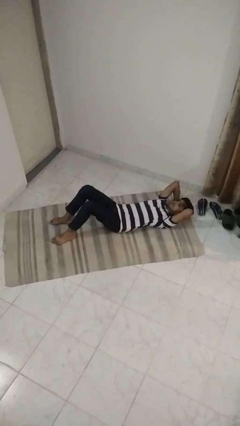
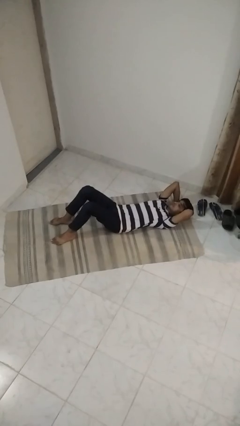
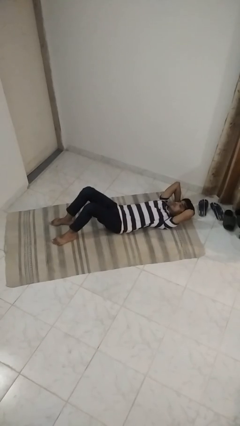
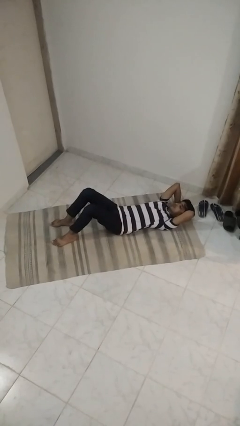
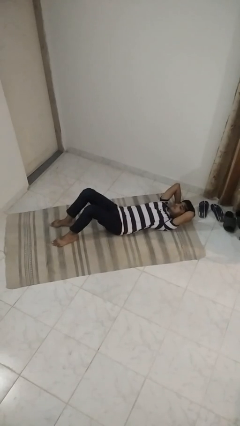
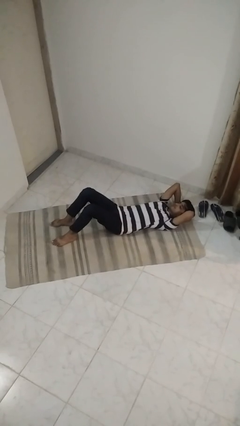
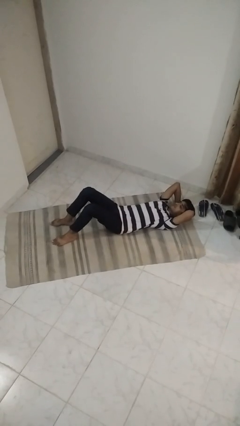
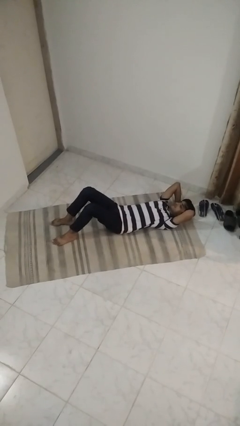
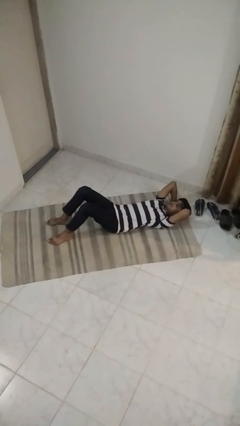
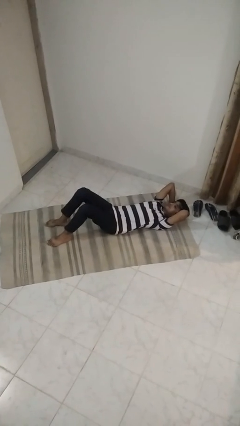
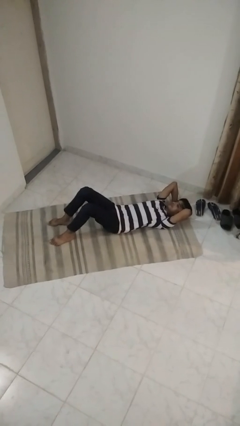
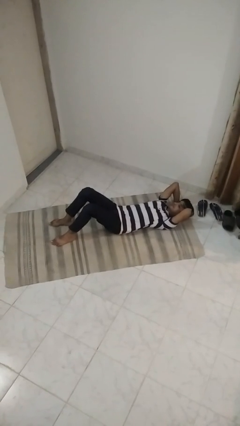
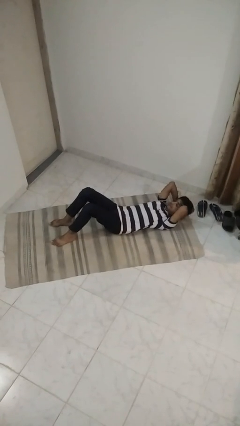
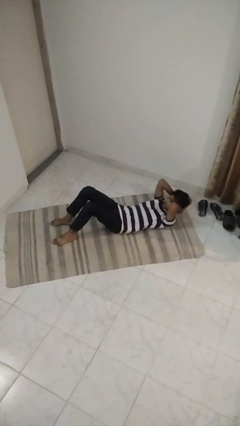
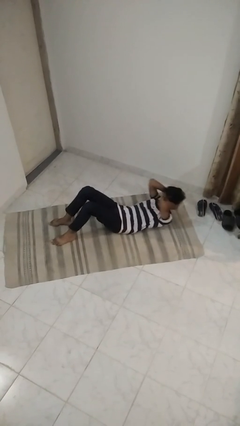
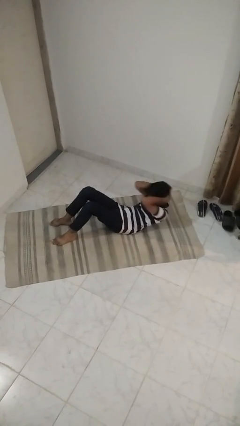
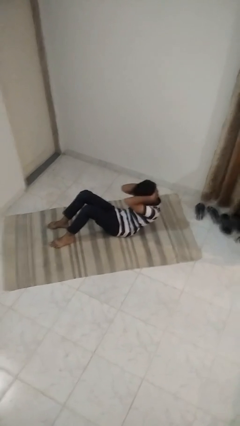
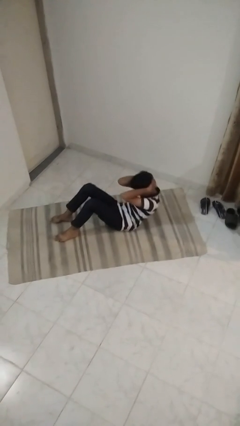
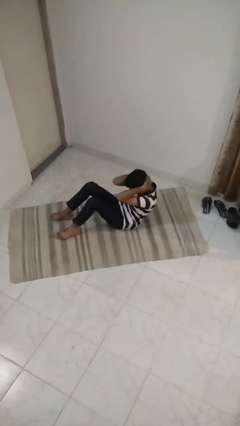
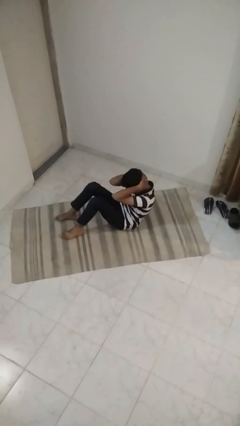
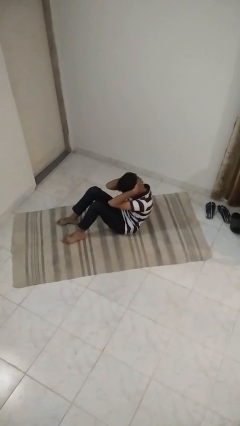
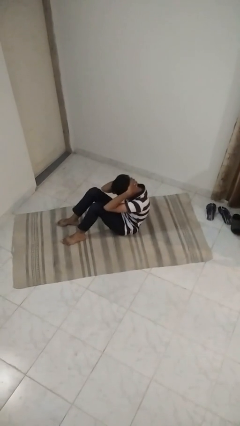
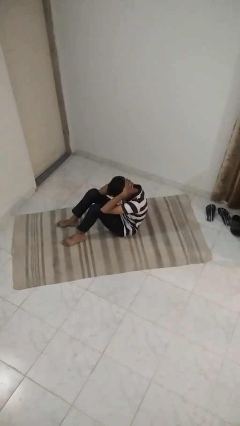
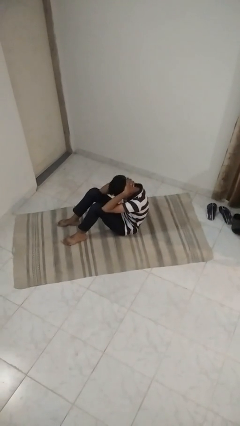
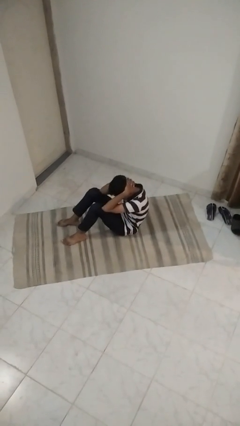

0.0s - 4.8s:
person exercises with situp

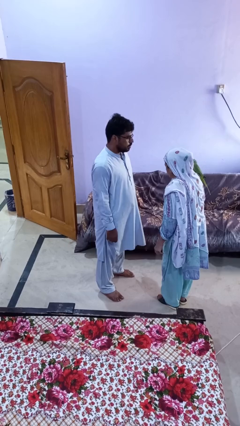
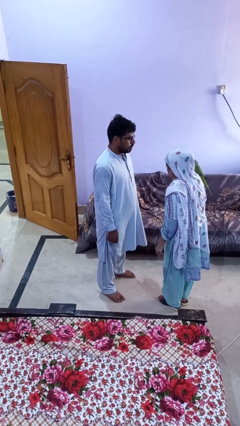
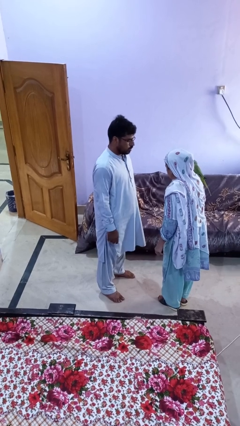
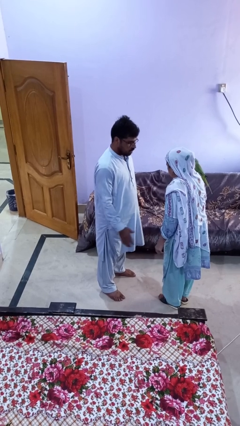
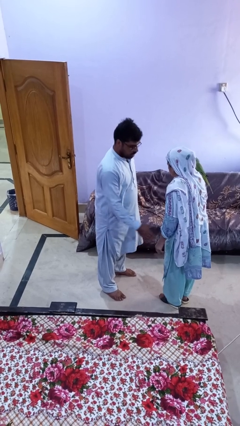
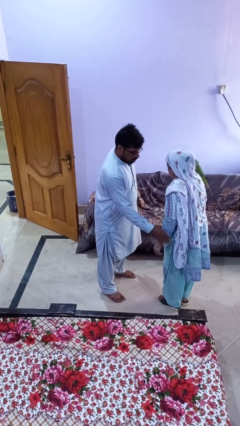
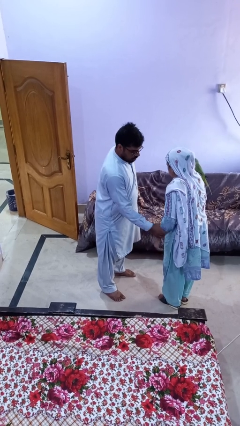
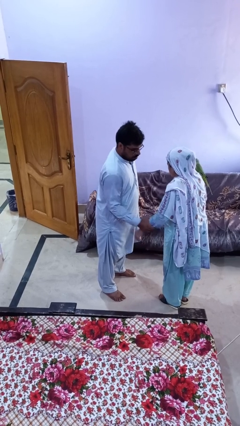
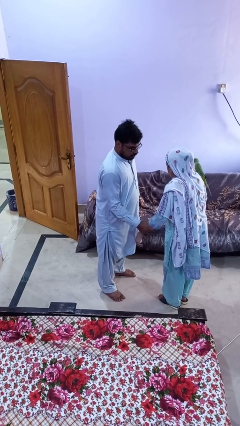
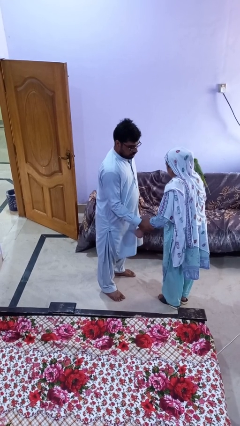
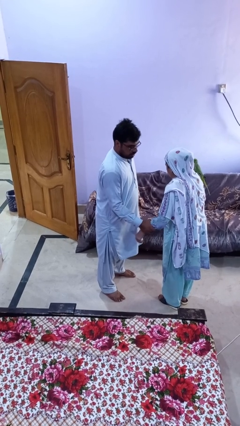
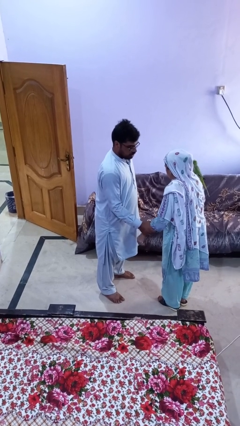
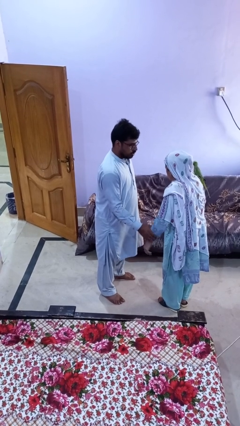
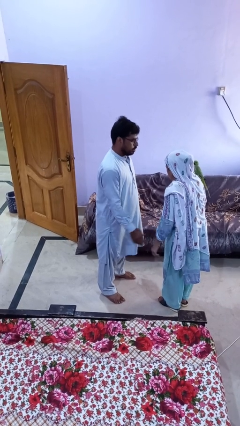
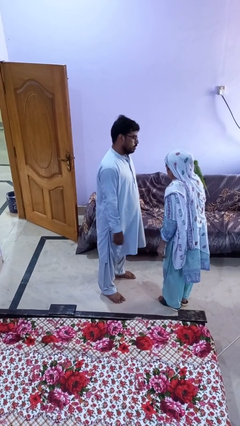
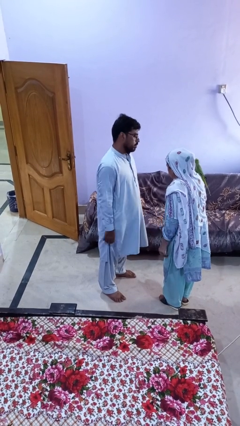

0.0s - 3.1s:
person grabs person by forearm

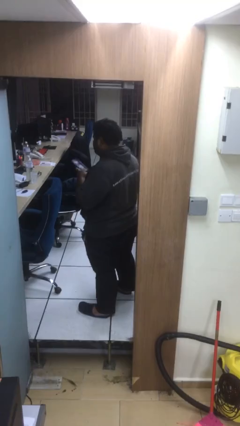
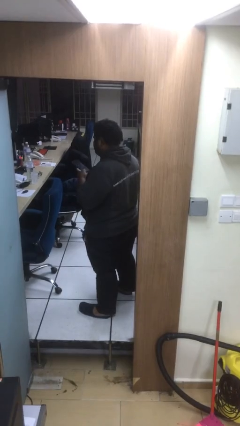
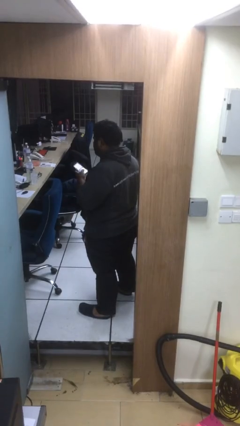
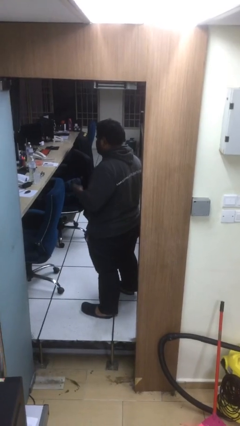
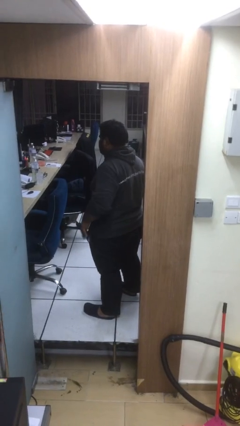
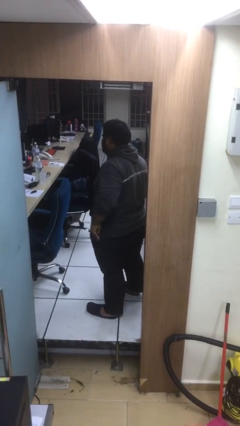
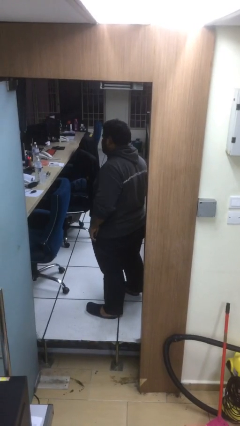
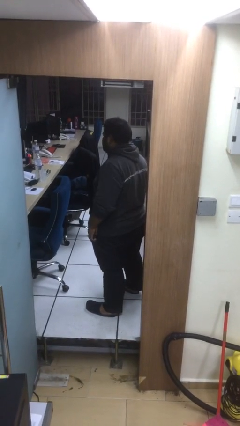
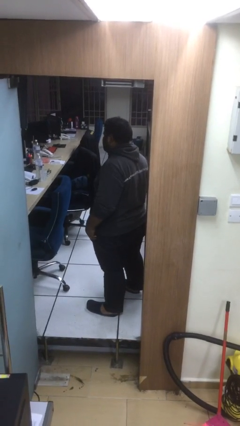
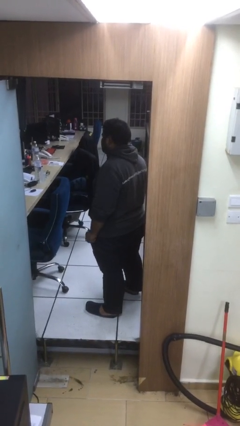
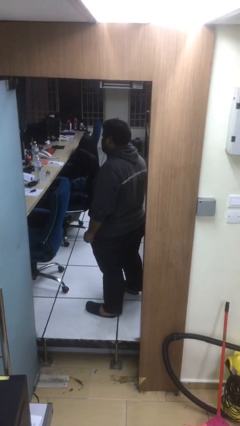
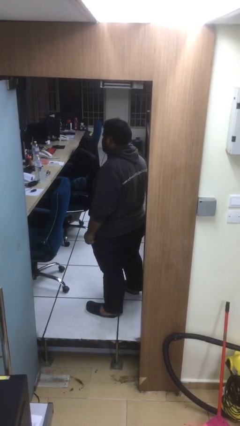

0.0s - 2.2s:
person puts phone into pocket

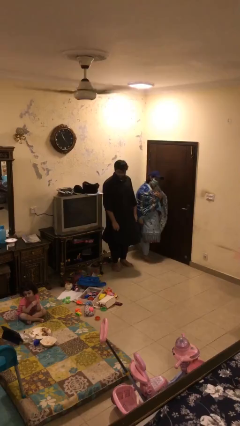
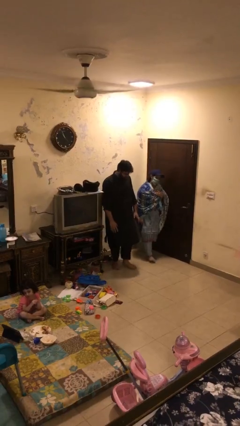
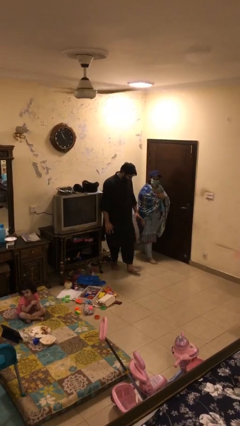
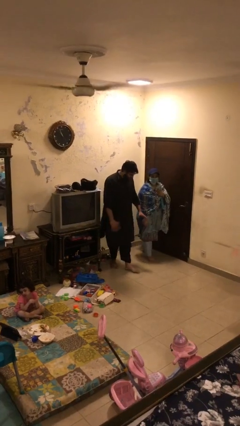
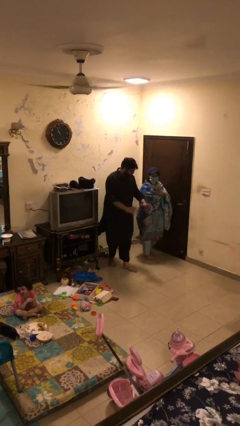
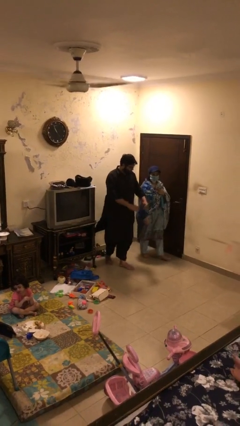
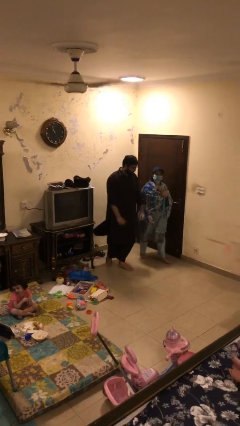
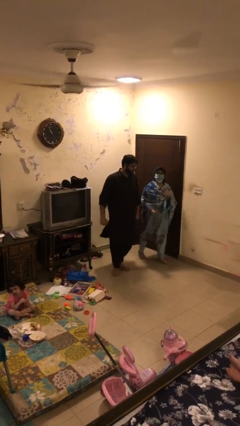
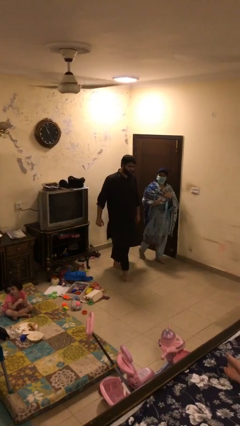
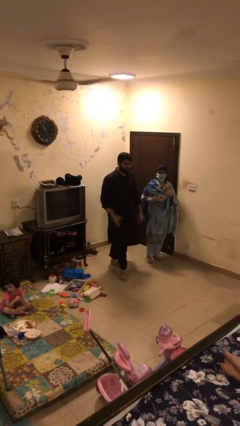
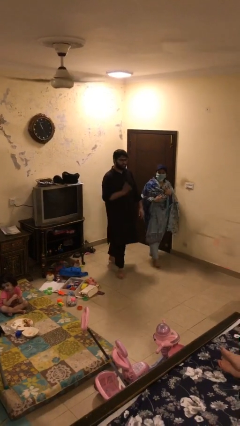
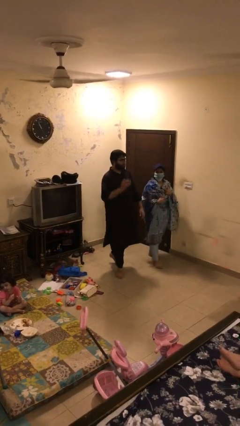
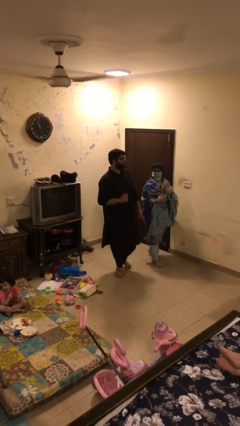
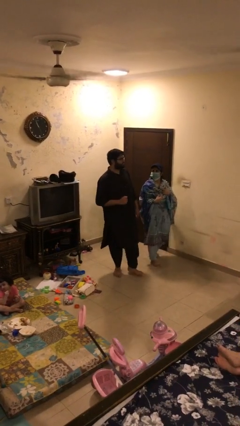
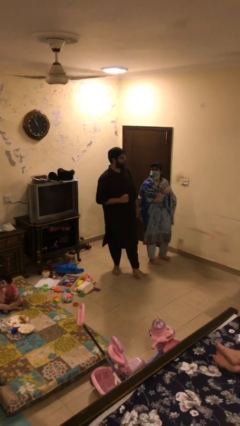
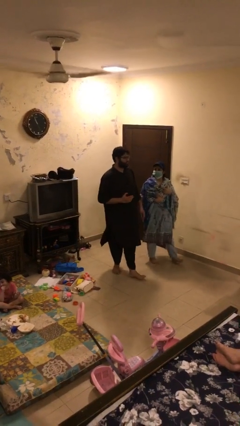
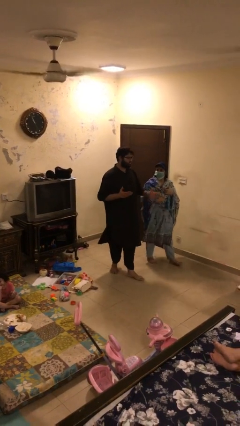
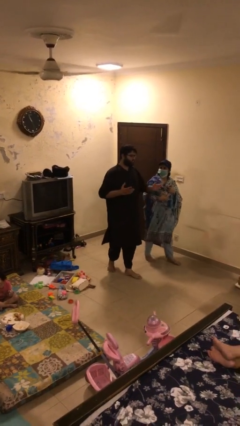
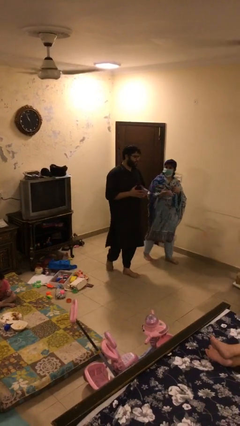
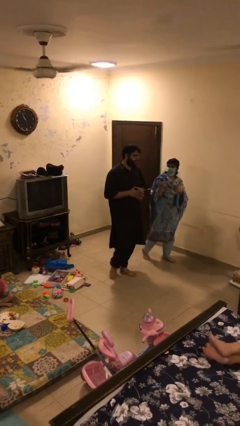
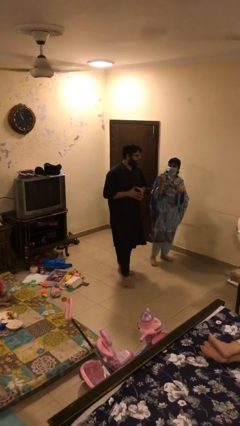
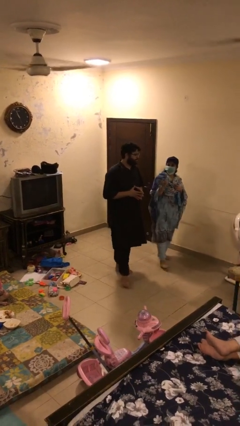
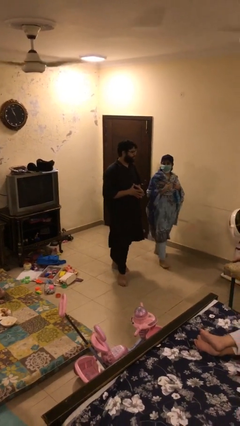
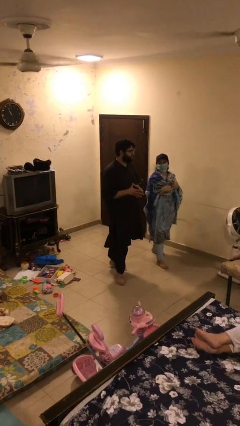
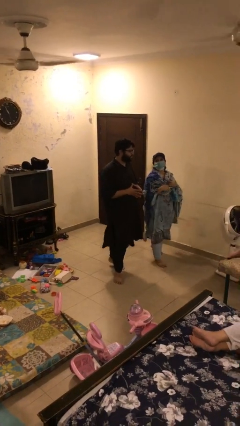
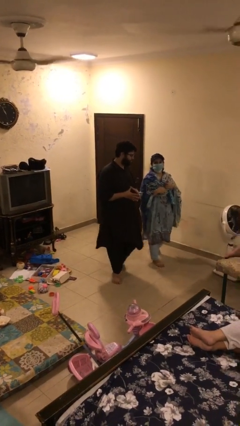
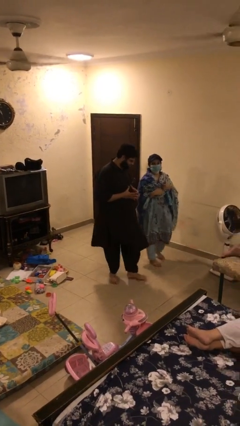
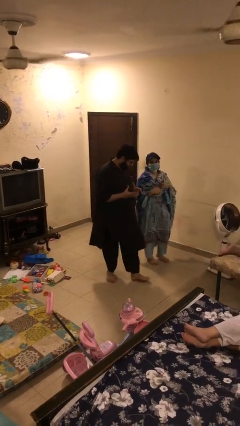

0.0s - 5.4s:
person talks to person

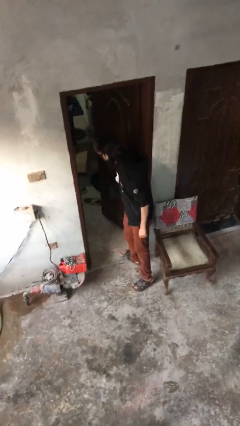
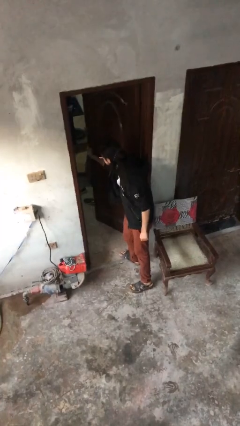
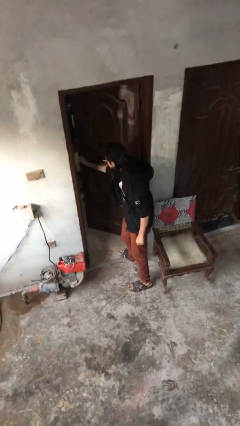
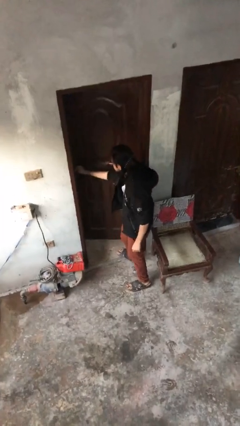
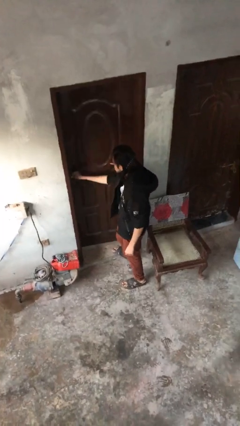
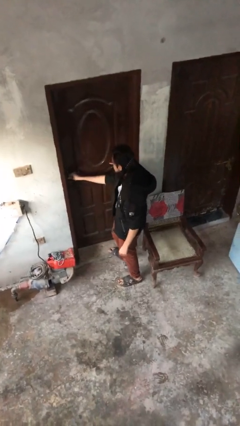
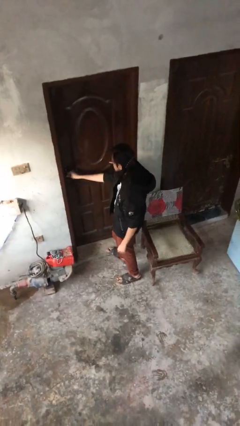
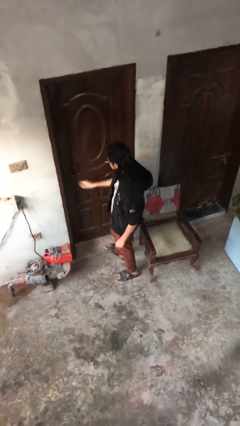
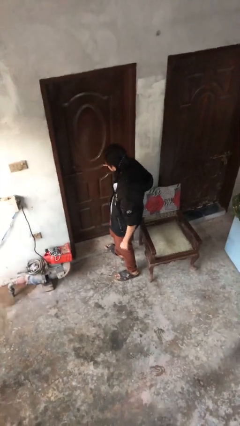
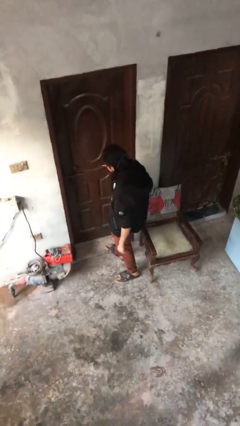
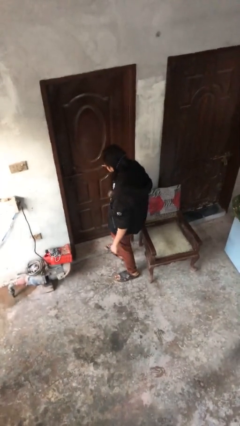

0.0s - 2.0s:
person closes facility door

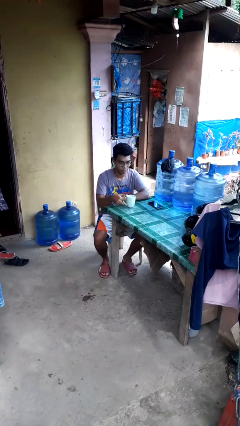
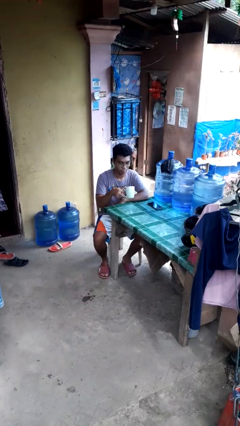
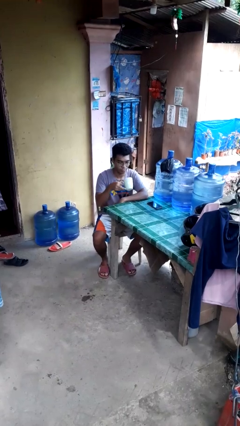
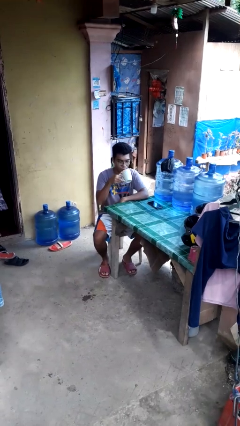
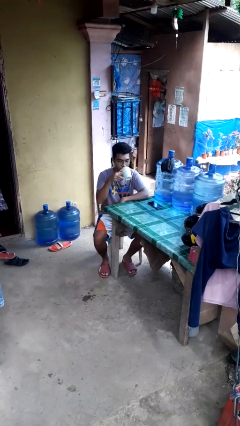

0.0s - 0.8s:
person picks up object from table
